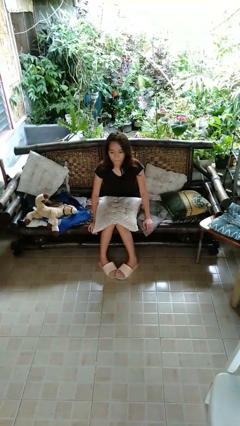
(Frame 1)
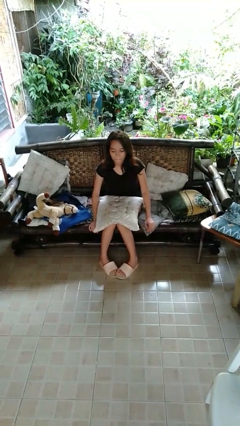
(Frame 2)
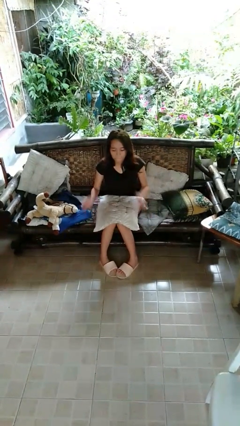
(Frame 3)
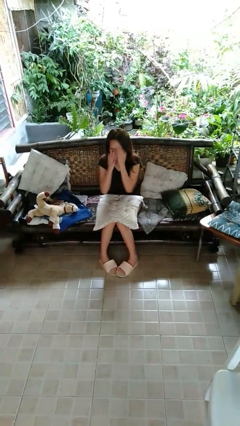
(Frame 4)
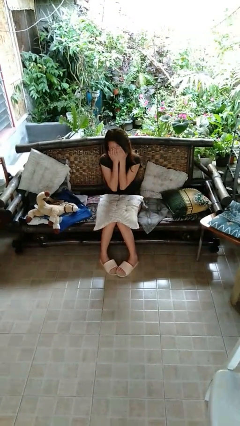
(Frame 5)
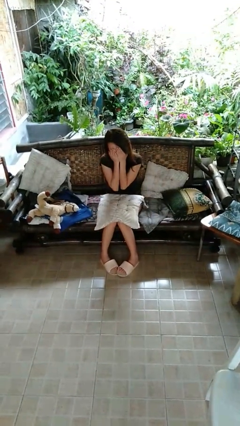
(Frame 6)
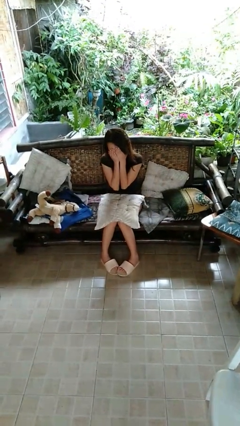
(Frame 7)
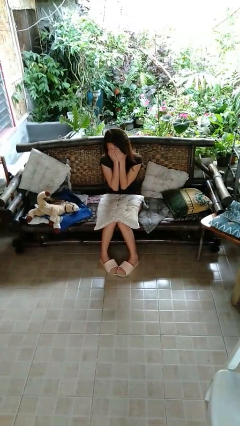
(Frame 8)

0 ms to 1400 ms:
person covers face with hands

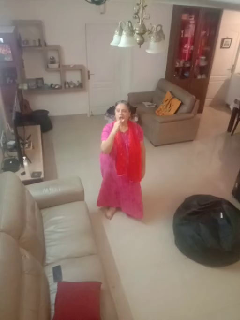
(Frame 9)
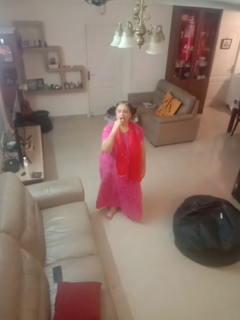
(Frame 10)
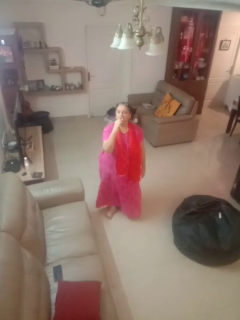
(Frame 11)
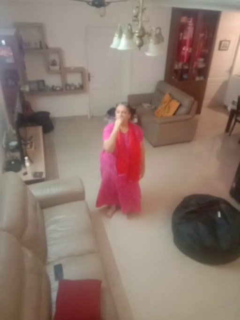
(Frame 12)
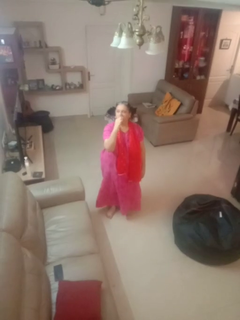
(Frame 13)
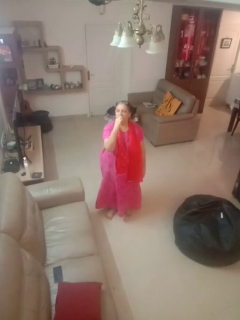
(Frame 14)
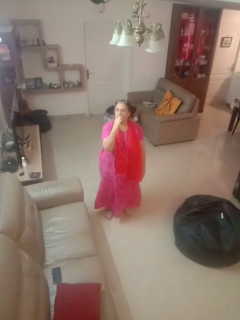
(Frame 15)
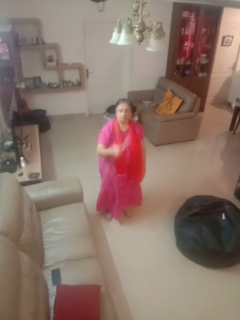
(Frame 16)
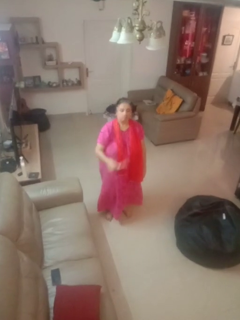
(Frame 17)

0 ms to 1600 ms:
person brushes teeth

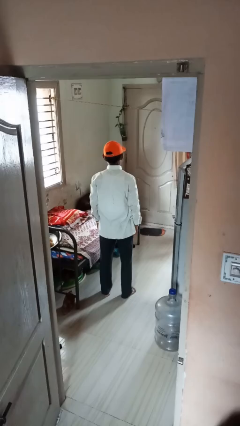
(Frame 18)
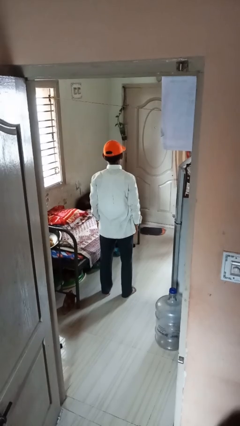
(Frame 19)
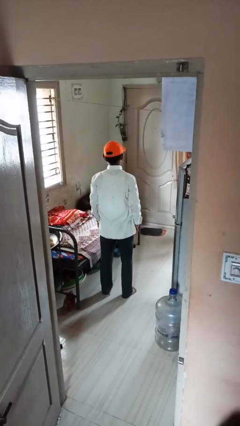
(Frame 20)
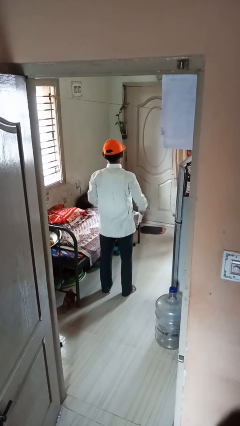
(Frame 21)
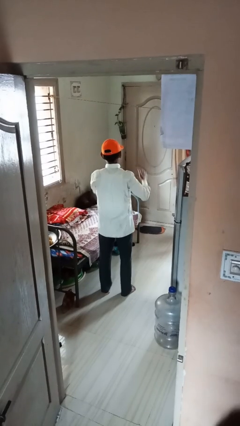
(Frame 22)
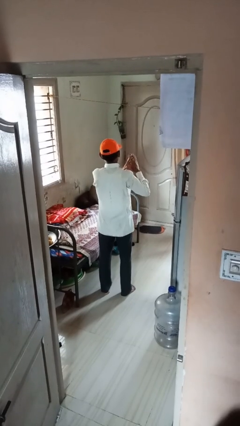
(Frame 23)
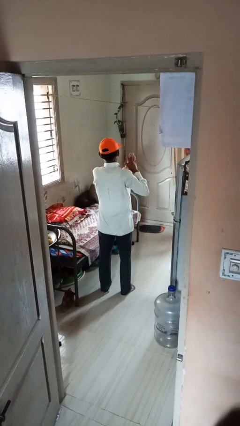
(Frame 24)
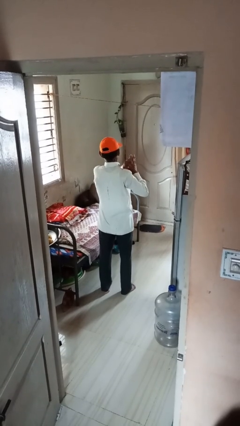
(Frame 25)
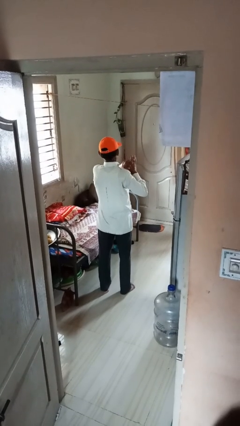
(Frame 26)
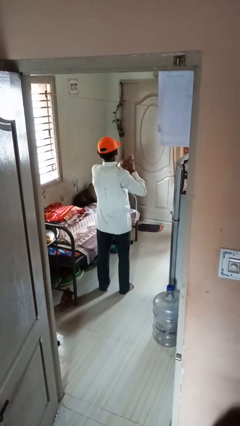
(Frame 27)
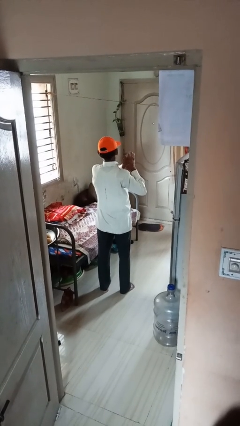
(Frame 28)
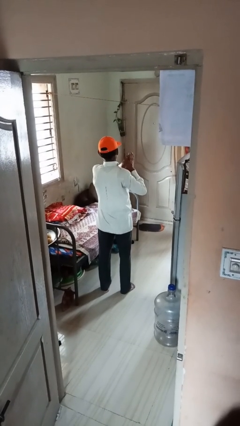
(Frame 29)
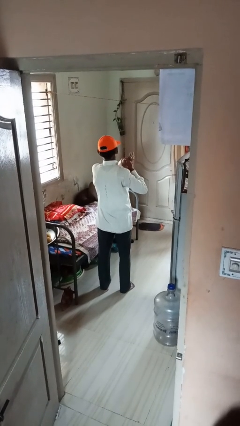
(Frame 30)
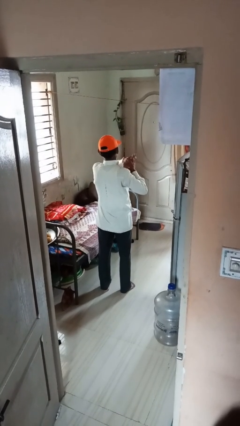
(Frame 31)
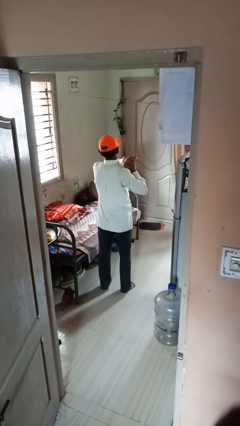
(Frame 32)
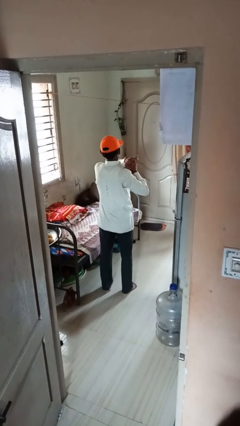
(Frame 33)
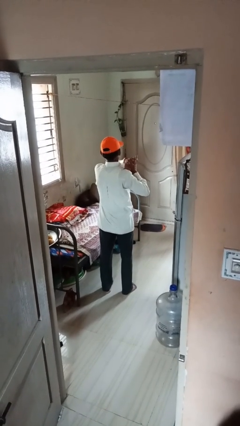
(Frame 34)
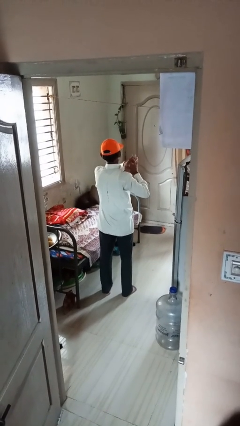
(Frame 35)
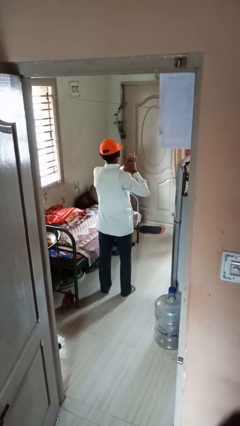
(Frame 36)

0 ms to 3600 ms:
person cracks knuckles

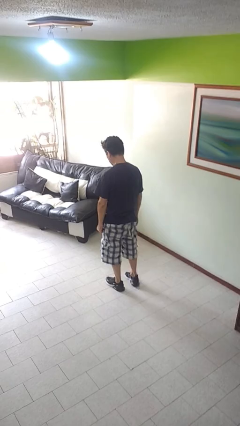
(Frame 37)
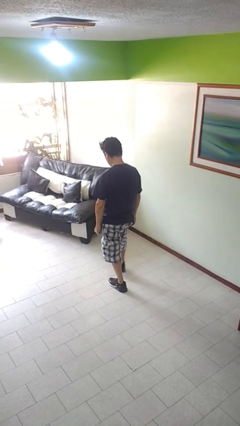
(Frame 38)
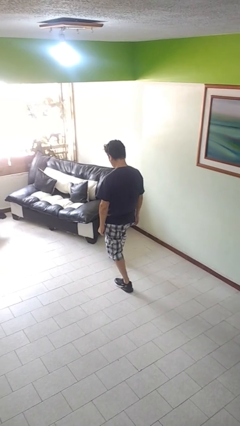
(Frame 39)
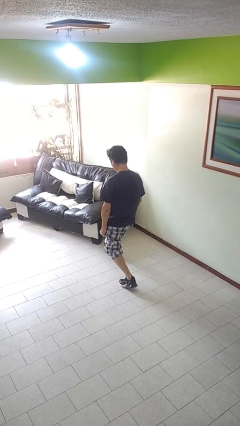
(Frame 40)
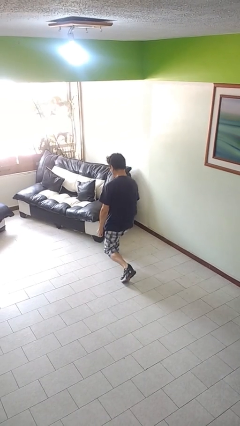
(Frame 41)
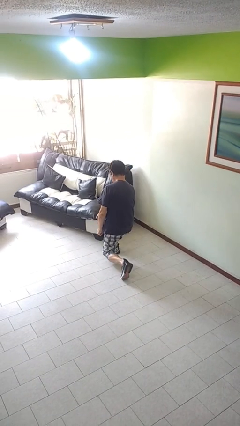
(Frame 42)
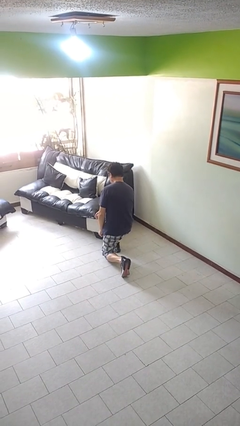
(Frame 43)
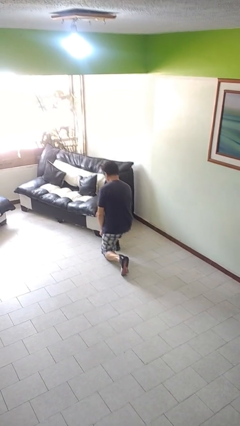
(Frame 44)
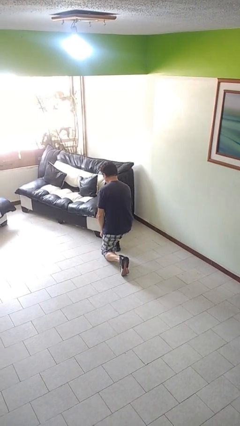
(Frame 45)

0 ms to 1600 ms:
person kneels

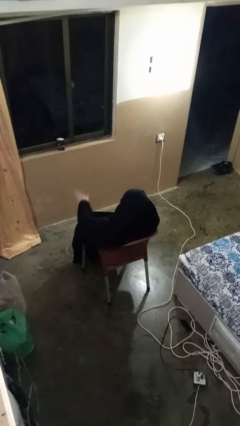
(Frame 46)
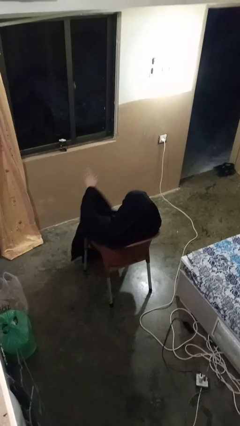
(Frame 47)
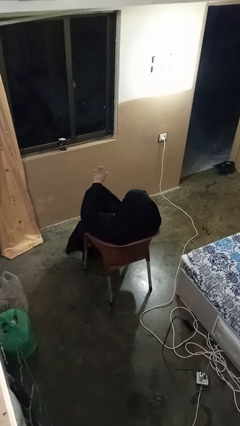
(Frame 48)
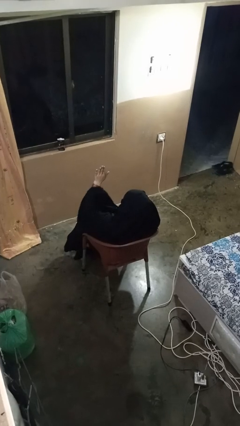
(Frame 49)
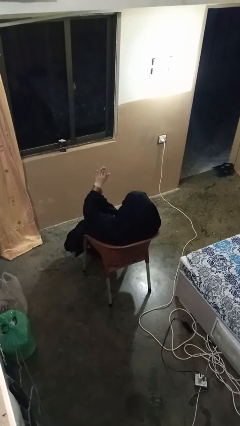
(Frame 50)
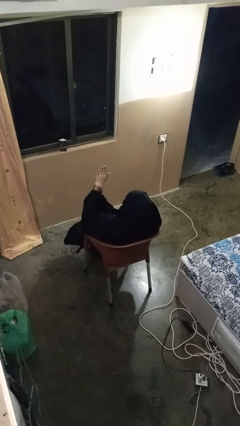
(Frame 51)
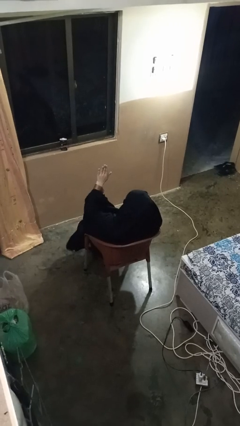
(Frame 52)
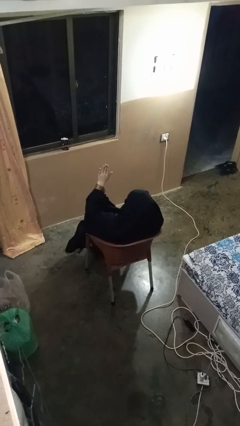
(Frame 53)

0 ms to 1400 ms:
person gestures raise hand

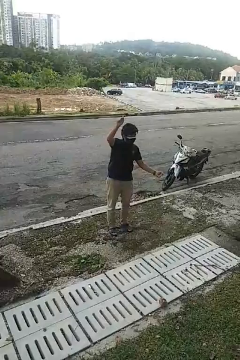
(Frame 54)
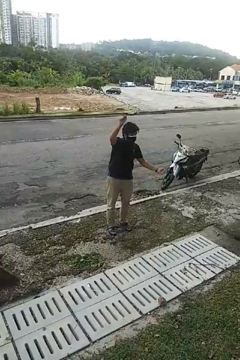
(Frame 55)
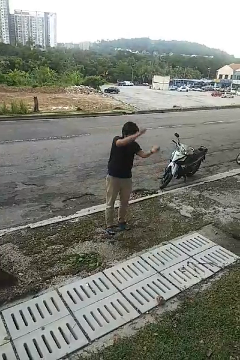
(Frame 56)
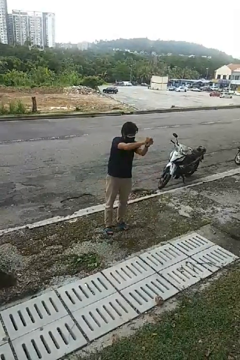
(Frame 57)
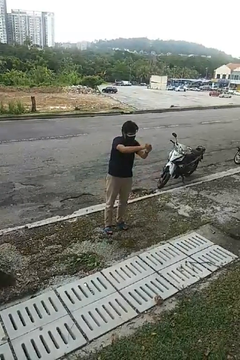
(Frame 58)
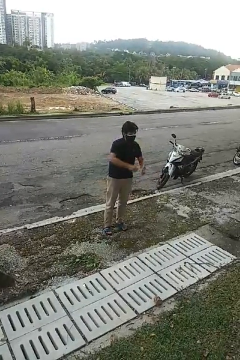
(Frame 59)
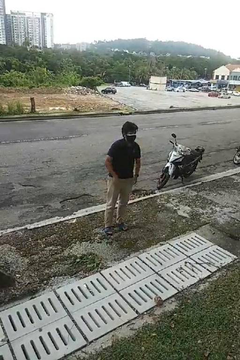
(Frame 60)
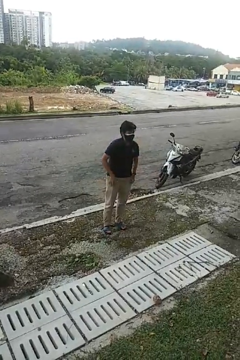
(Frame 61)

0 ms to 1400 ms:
person gestures zoom out

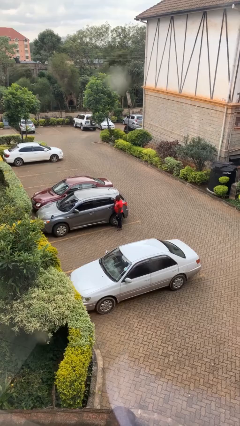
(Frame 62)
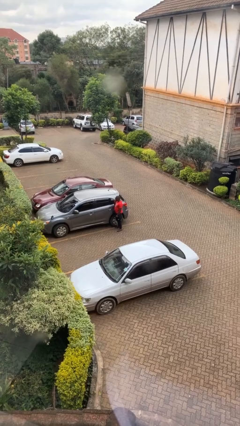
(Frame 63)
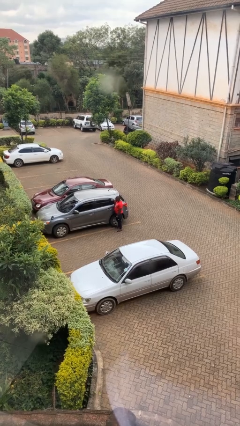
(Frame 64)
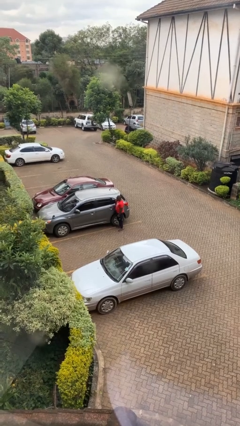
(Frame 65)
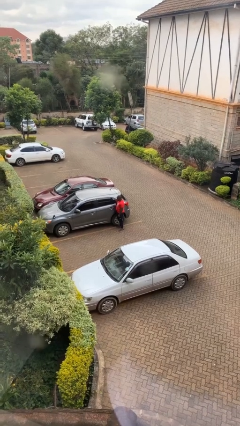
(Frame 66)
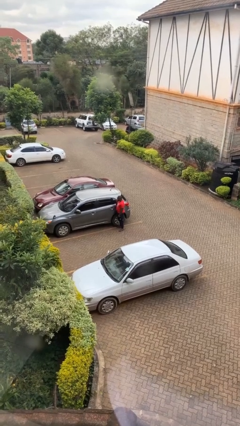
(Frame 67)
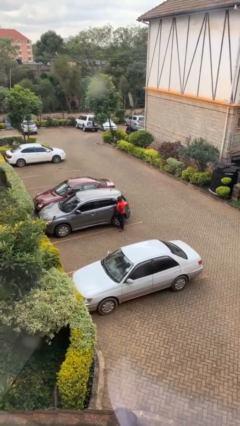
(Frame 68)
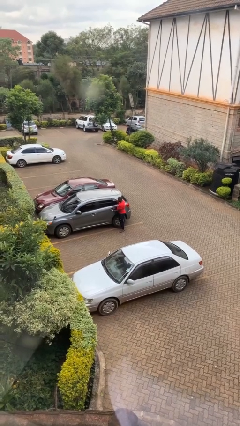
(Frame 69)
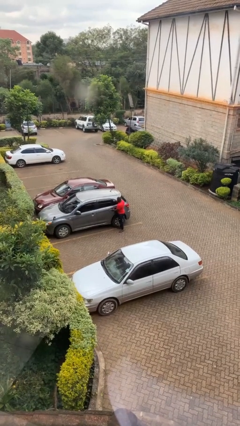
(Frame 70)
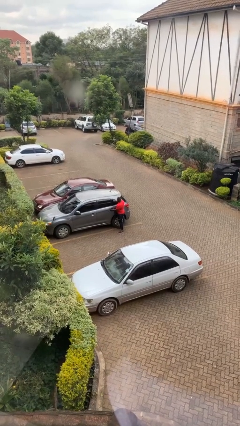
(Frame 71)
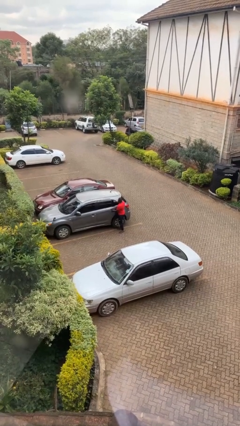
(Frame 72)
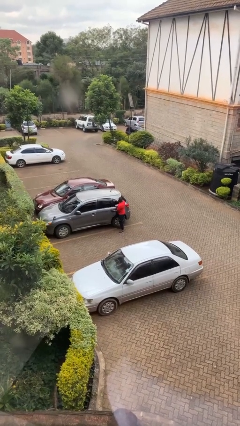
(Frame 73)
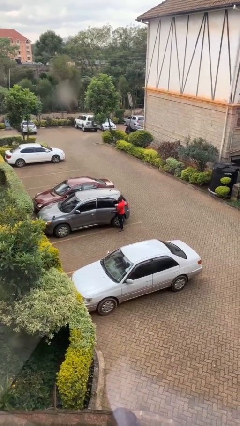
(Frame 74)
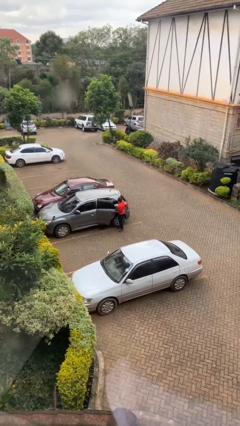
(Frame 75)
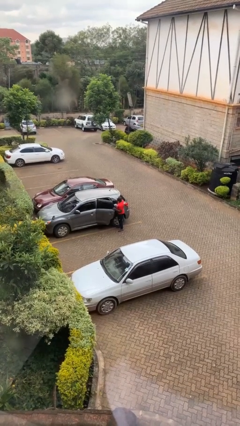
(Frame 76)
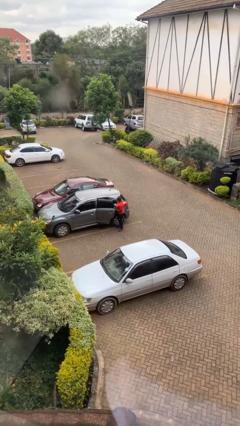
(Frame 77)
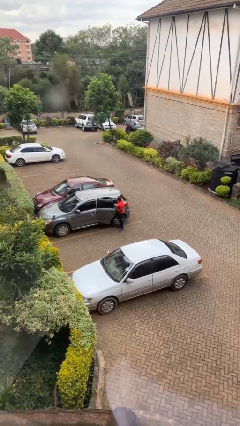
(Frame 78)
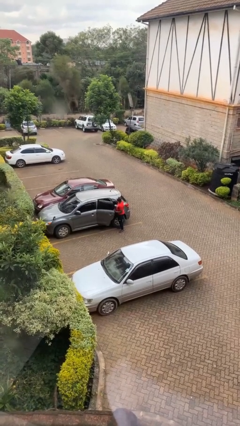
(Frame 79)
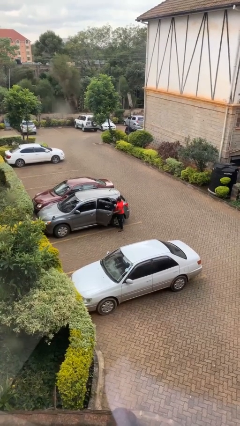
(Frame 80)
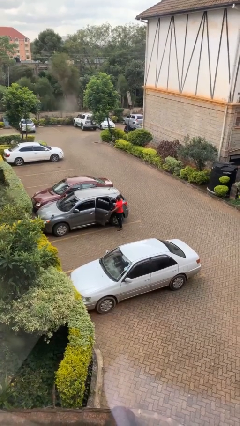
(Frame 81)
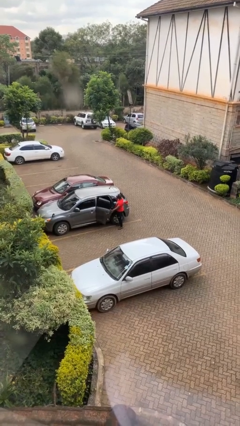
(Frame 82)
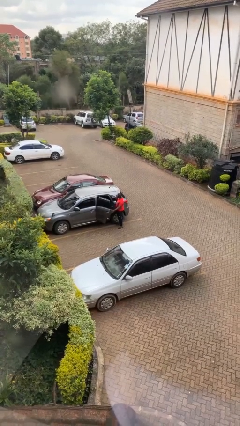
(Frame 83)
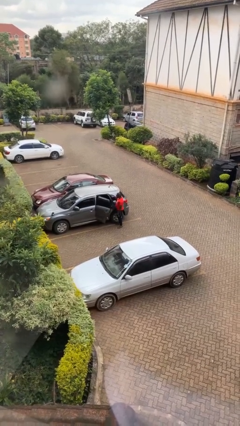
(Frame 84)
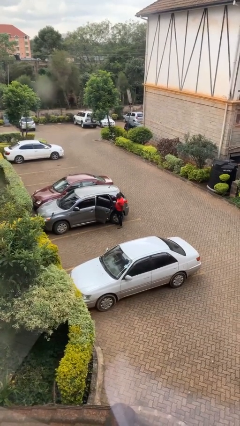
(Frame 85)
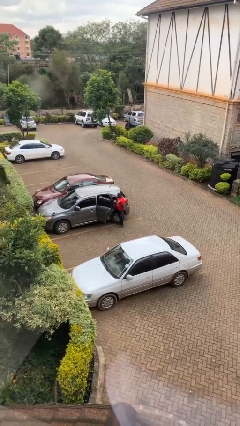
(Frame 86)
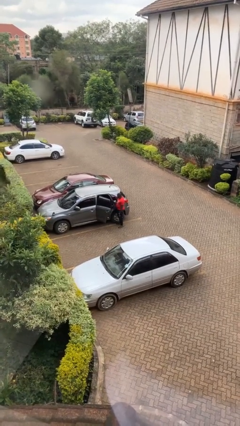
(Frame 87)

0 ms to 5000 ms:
person opens car door

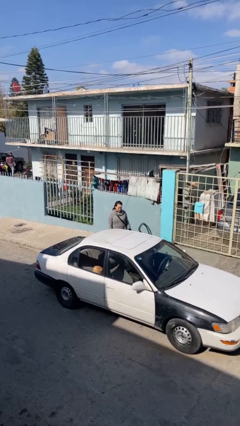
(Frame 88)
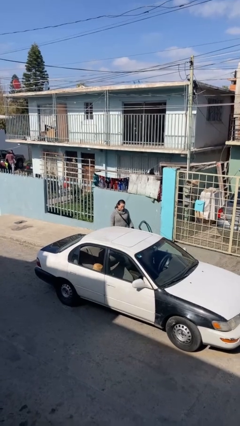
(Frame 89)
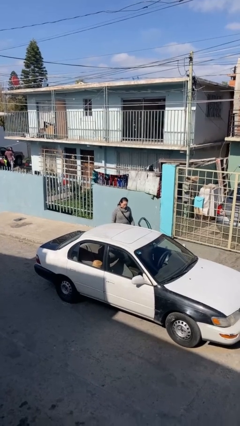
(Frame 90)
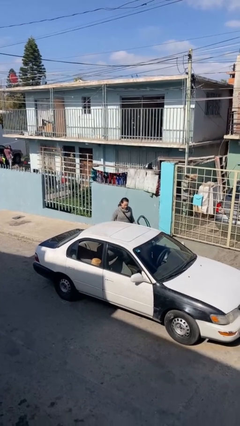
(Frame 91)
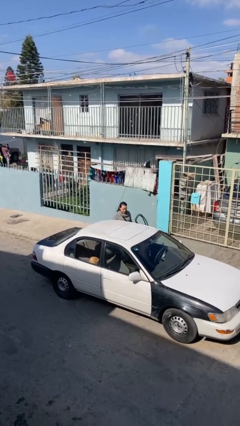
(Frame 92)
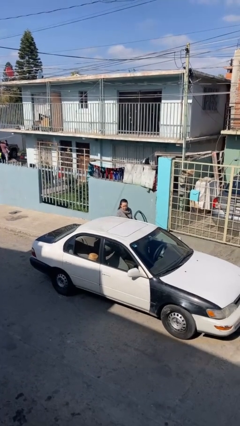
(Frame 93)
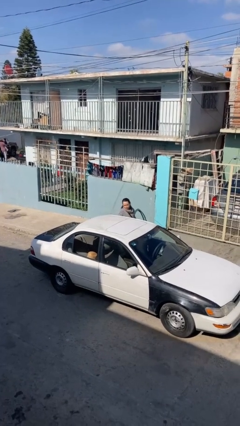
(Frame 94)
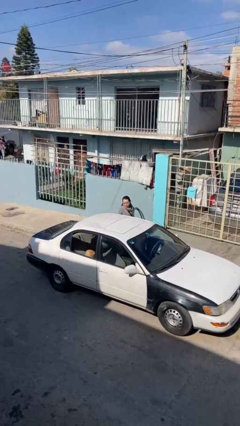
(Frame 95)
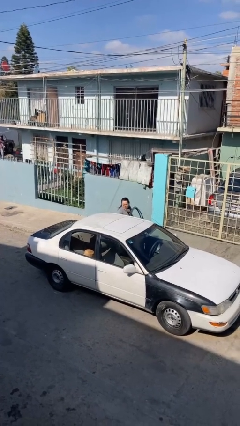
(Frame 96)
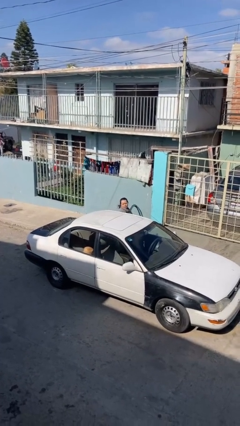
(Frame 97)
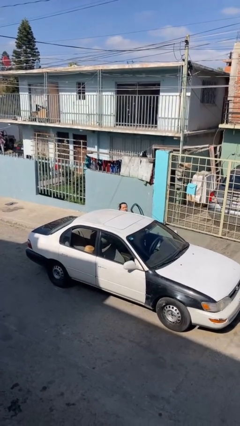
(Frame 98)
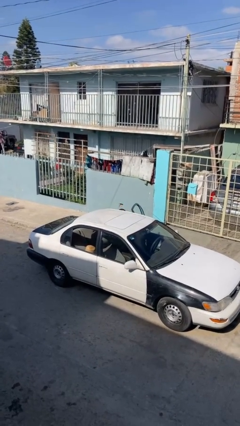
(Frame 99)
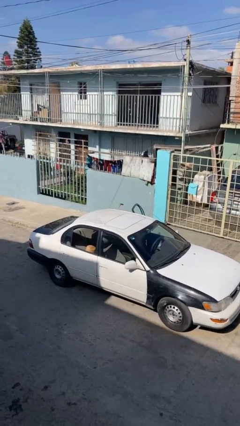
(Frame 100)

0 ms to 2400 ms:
person enters car
